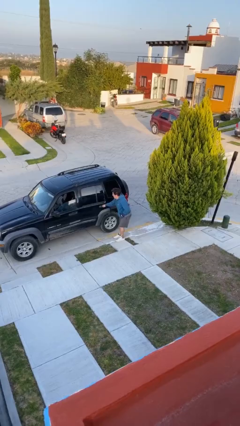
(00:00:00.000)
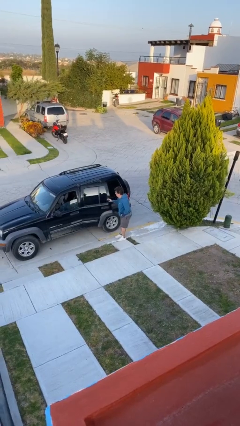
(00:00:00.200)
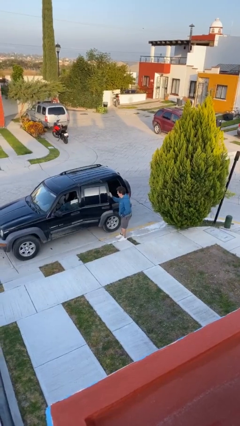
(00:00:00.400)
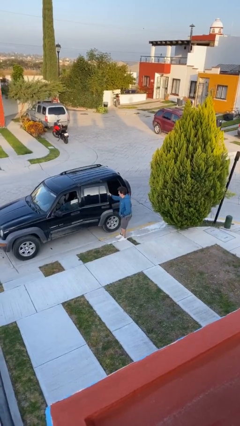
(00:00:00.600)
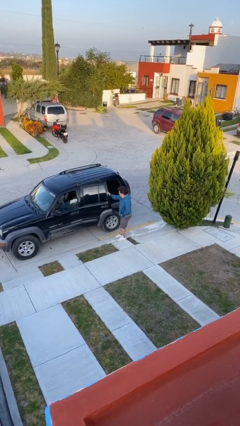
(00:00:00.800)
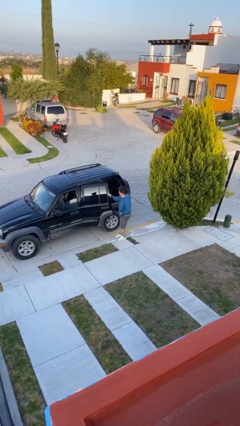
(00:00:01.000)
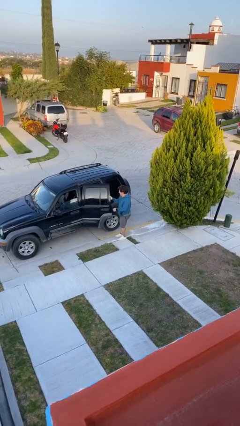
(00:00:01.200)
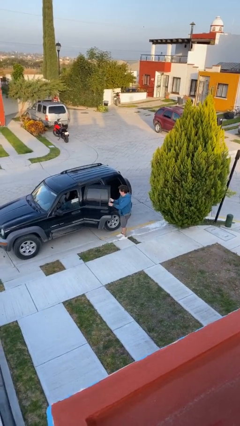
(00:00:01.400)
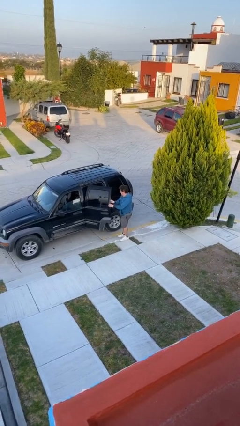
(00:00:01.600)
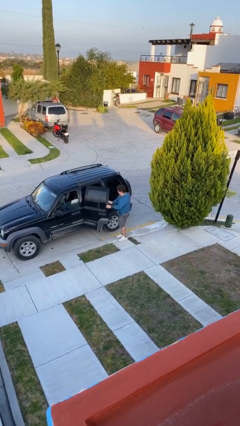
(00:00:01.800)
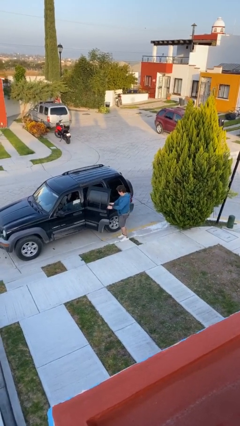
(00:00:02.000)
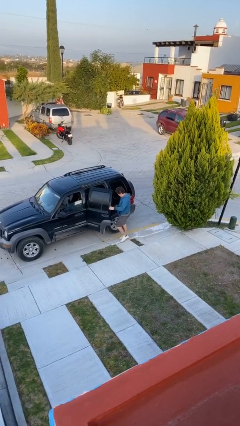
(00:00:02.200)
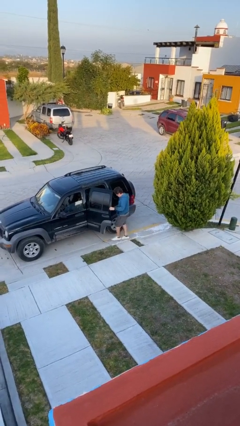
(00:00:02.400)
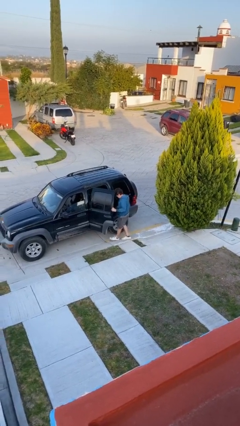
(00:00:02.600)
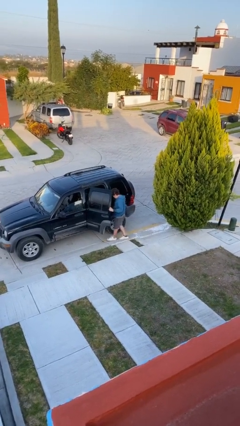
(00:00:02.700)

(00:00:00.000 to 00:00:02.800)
person opens car door

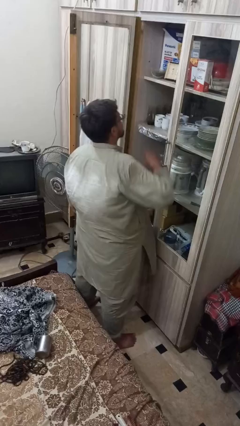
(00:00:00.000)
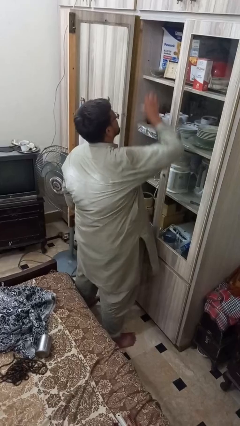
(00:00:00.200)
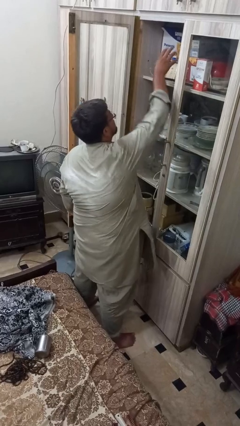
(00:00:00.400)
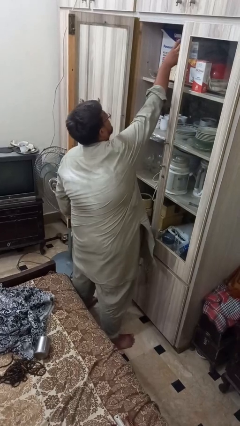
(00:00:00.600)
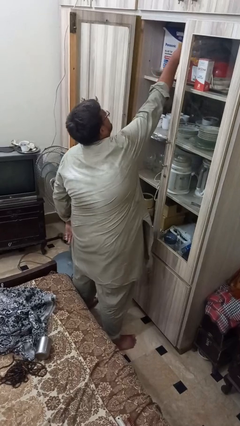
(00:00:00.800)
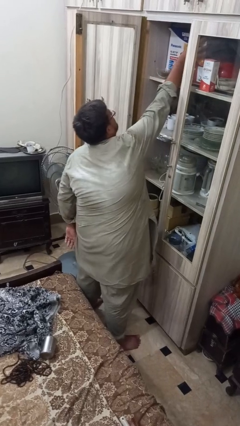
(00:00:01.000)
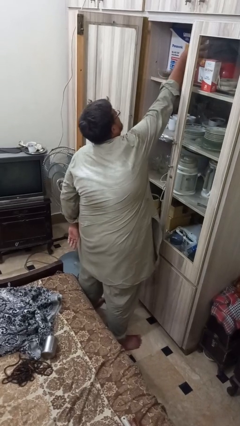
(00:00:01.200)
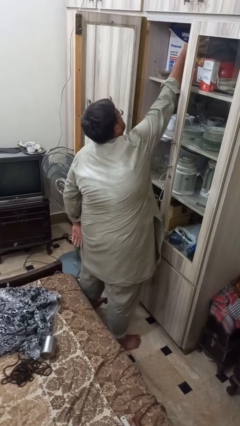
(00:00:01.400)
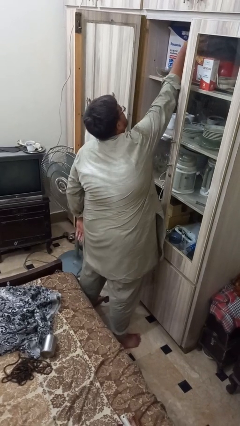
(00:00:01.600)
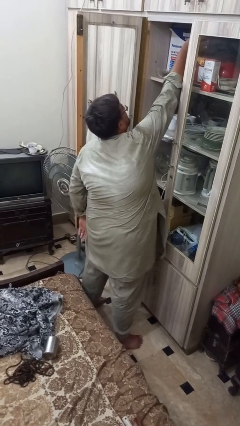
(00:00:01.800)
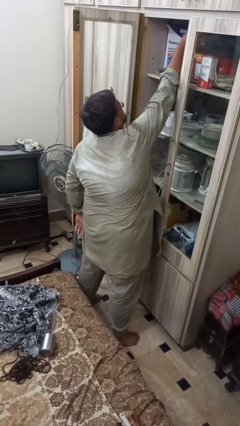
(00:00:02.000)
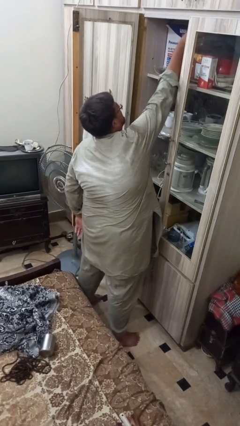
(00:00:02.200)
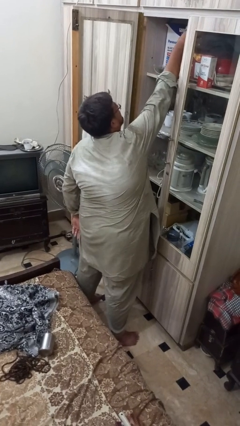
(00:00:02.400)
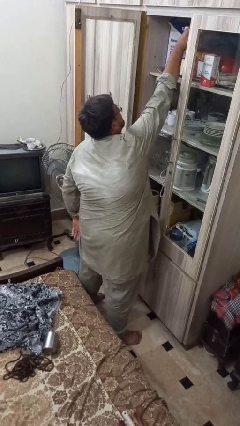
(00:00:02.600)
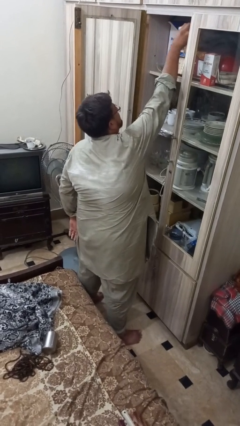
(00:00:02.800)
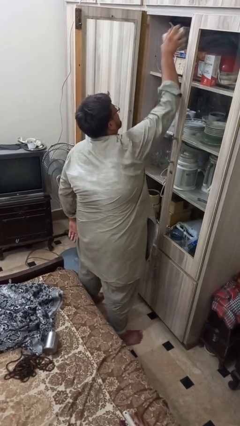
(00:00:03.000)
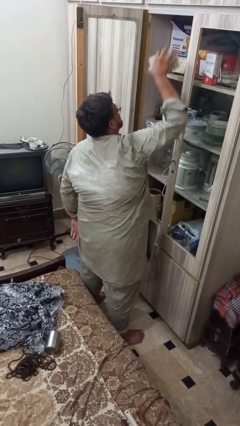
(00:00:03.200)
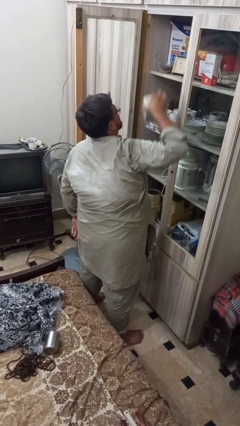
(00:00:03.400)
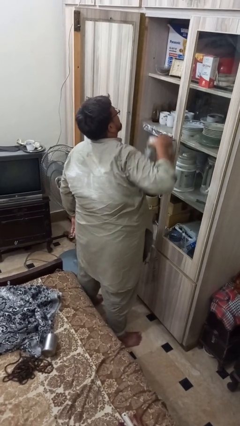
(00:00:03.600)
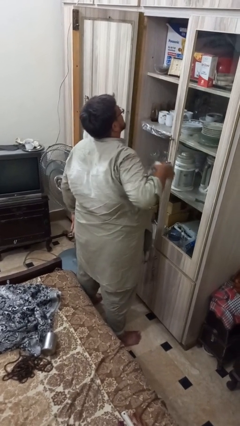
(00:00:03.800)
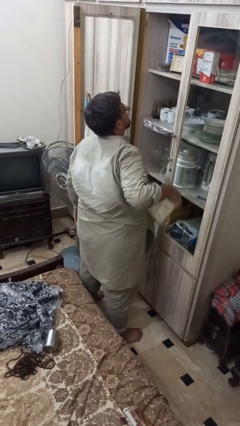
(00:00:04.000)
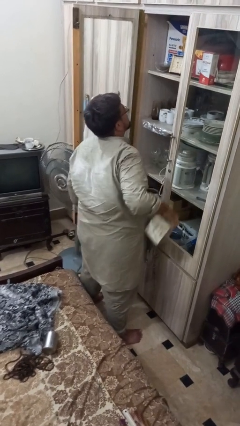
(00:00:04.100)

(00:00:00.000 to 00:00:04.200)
person picks up object from shelf

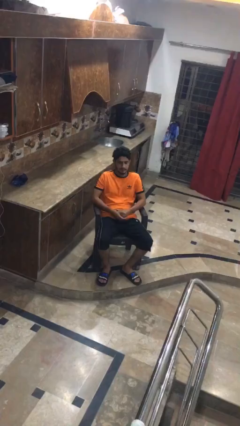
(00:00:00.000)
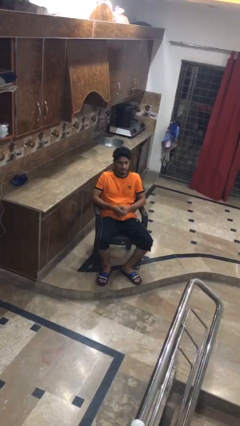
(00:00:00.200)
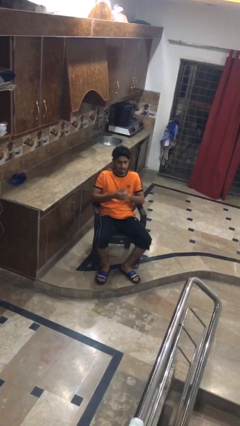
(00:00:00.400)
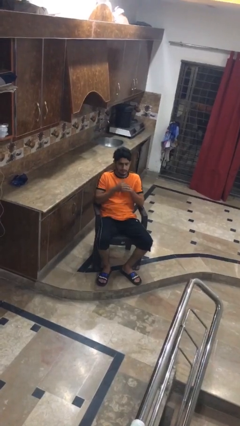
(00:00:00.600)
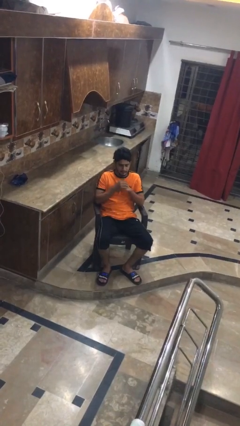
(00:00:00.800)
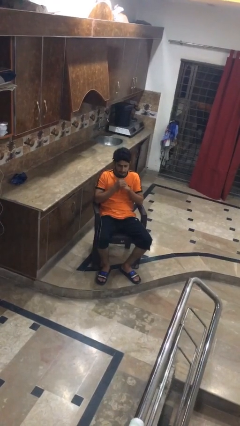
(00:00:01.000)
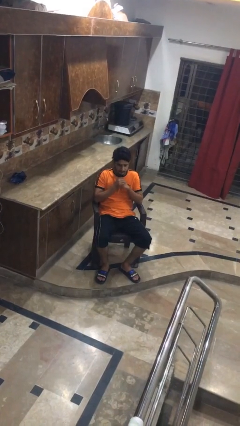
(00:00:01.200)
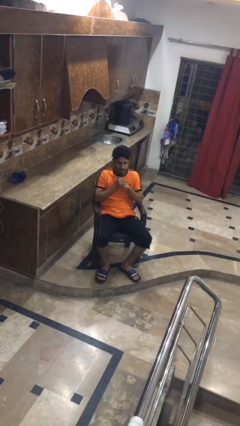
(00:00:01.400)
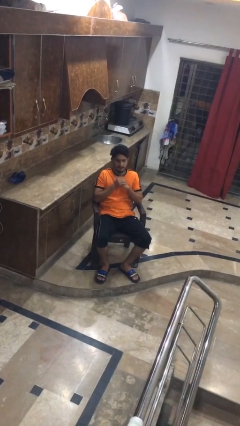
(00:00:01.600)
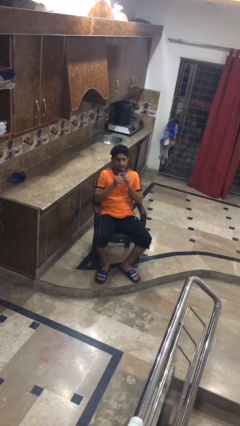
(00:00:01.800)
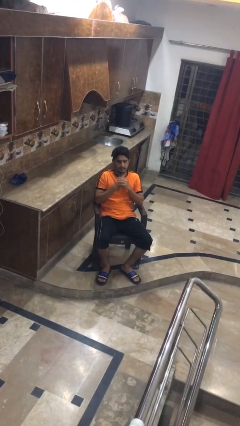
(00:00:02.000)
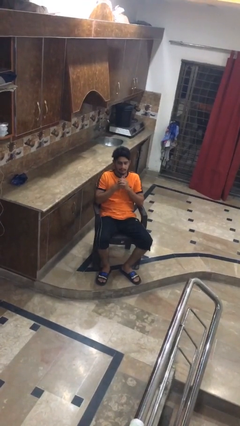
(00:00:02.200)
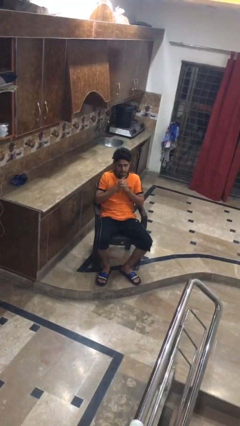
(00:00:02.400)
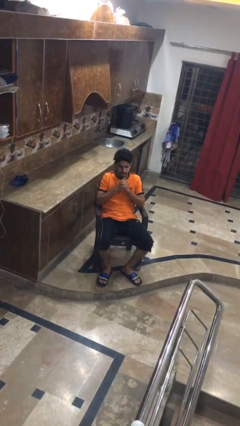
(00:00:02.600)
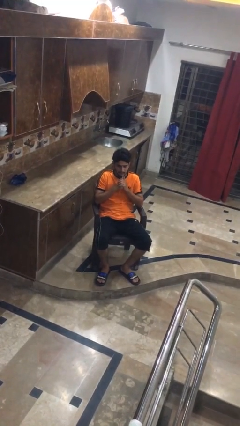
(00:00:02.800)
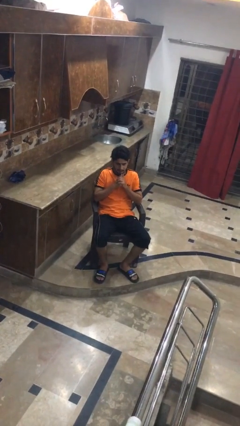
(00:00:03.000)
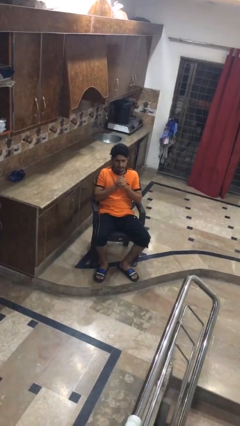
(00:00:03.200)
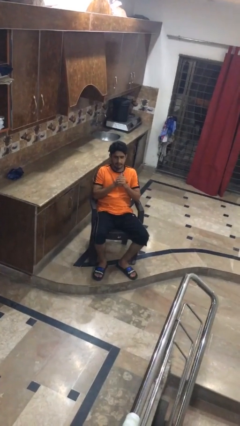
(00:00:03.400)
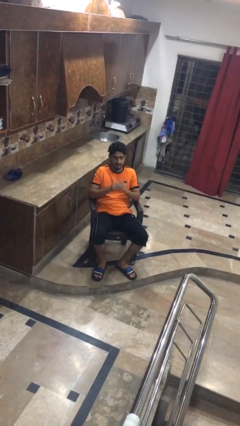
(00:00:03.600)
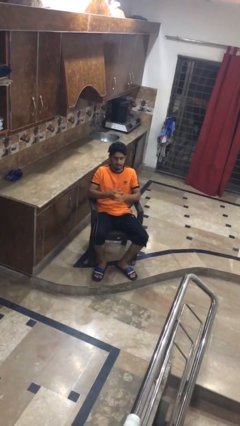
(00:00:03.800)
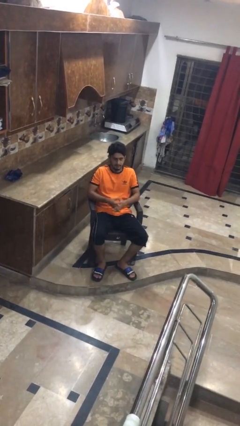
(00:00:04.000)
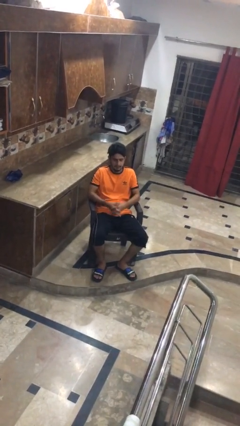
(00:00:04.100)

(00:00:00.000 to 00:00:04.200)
person cracks knuckles

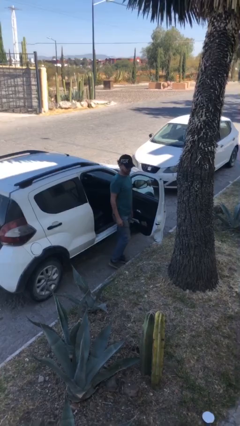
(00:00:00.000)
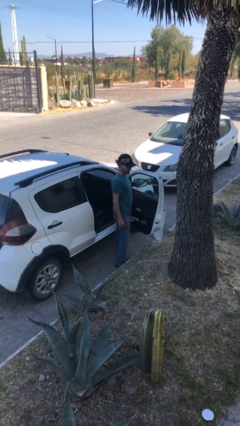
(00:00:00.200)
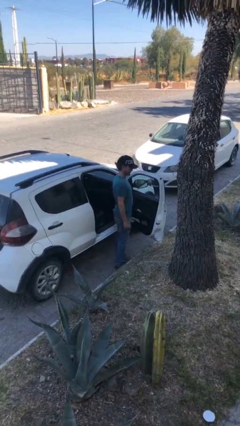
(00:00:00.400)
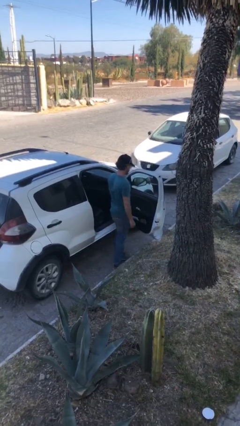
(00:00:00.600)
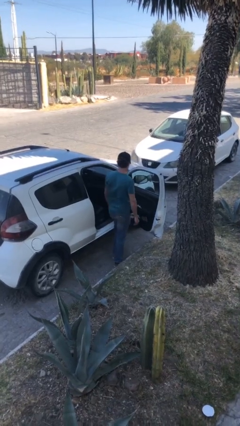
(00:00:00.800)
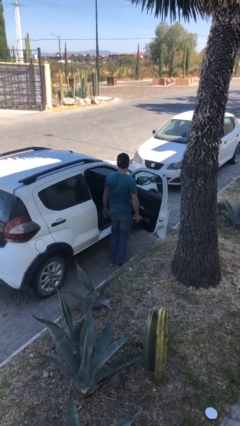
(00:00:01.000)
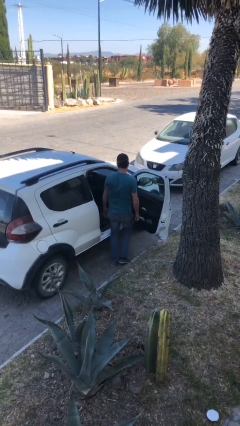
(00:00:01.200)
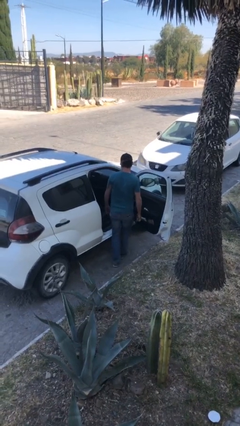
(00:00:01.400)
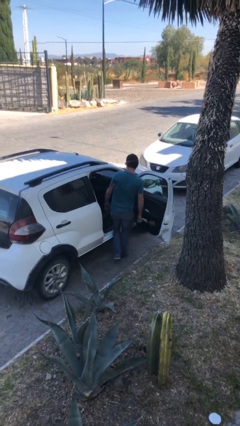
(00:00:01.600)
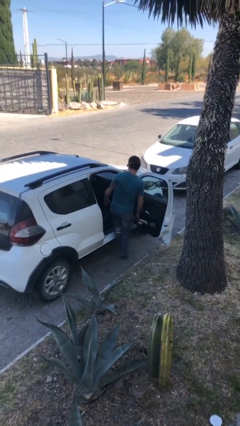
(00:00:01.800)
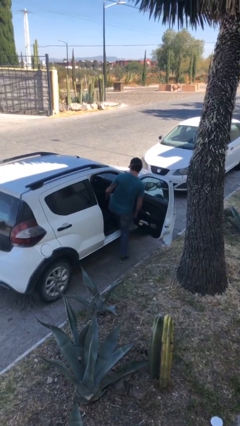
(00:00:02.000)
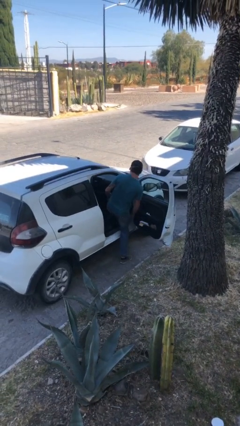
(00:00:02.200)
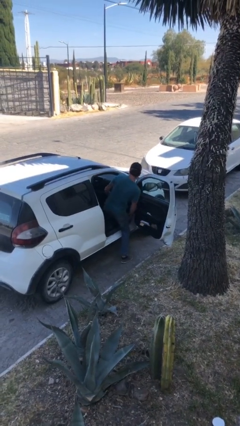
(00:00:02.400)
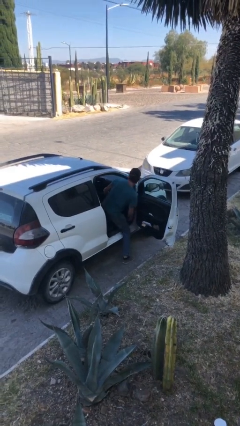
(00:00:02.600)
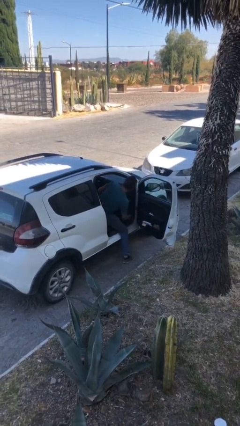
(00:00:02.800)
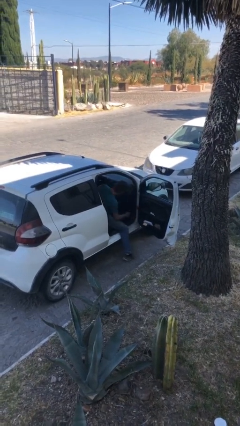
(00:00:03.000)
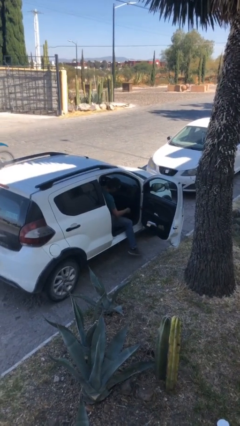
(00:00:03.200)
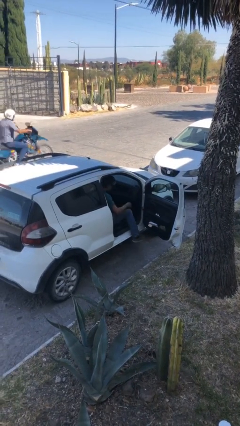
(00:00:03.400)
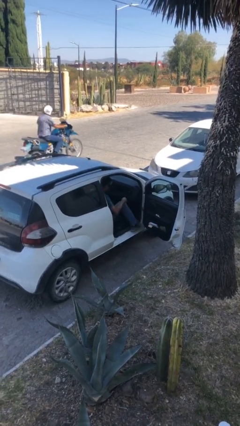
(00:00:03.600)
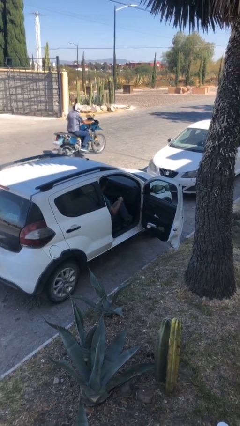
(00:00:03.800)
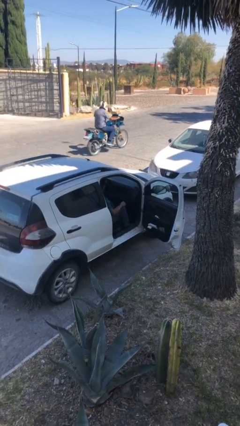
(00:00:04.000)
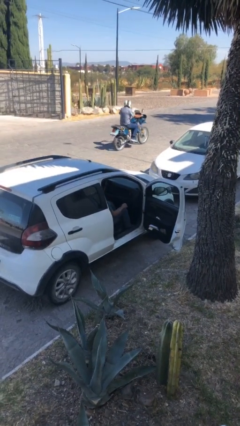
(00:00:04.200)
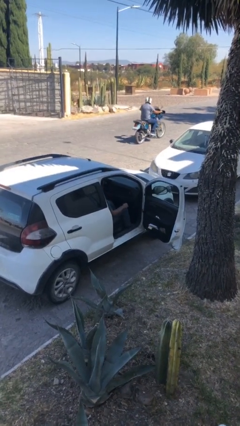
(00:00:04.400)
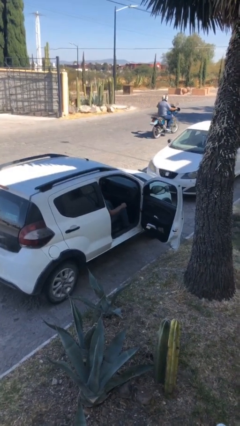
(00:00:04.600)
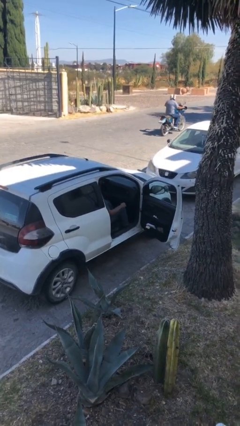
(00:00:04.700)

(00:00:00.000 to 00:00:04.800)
person enters car

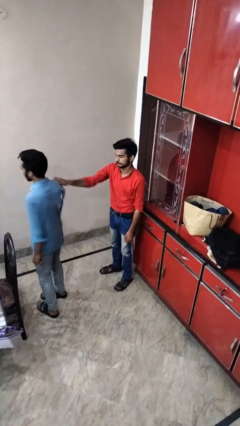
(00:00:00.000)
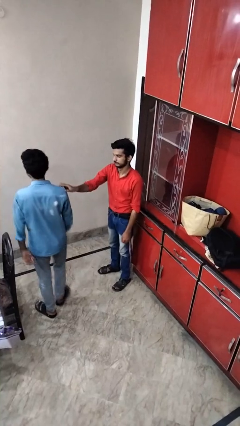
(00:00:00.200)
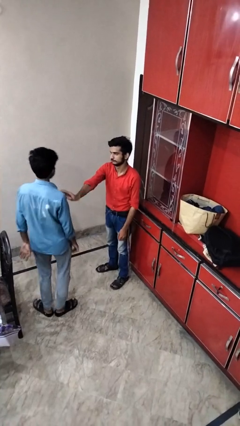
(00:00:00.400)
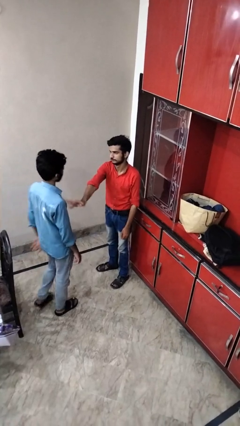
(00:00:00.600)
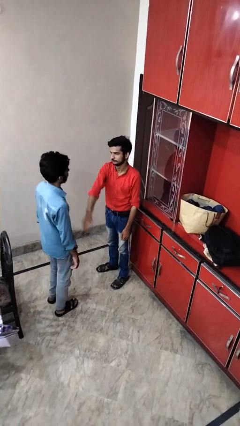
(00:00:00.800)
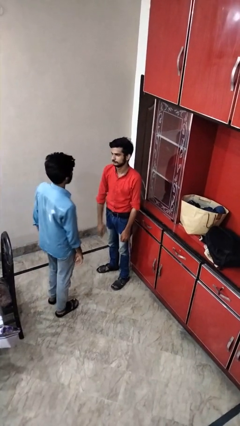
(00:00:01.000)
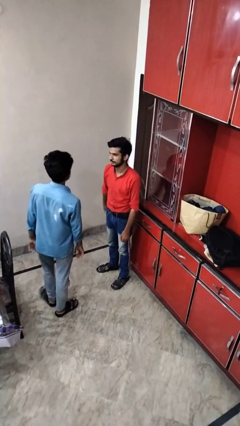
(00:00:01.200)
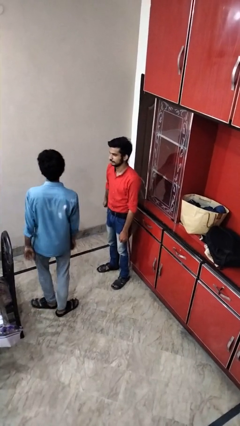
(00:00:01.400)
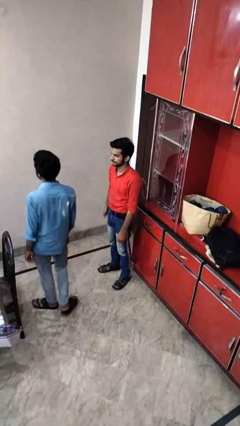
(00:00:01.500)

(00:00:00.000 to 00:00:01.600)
person spins person around
